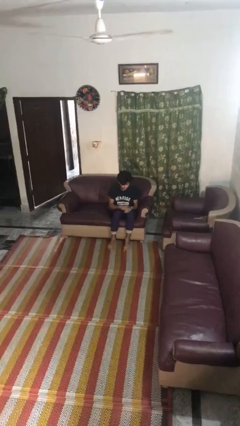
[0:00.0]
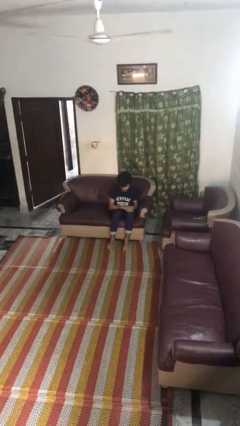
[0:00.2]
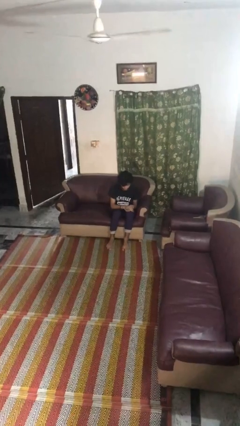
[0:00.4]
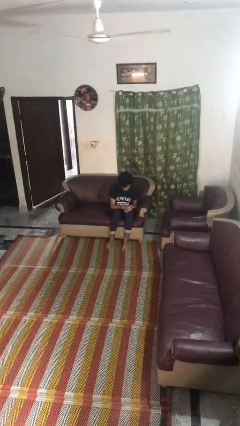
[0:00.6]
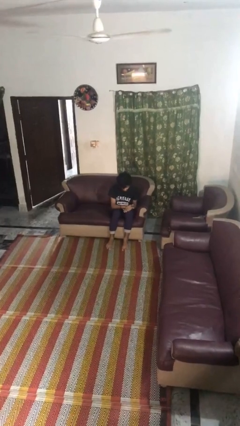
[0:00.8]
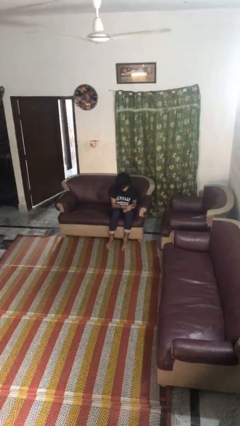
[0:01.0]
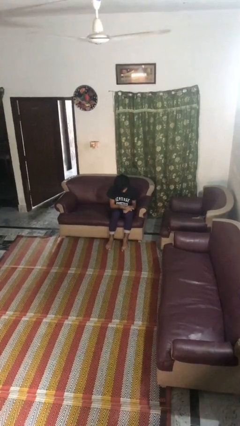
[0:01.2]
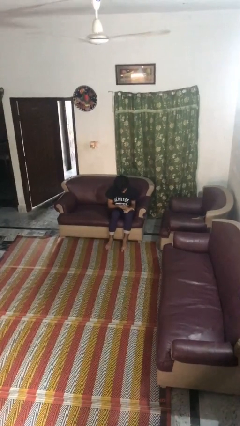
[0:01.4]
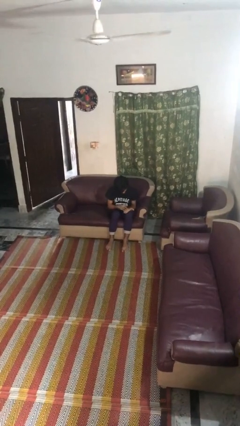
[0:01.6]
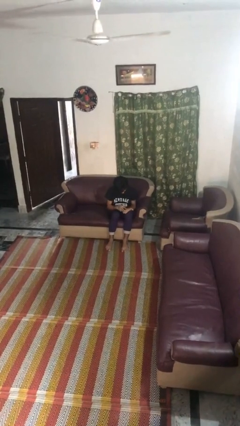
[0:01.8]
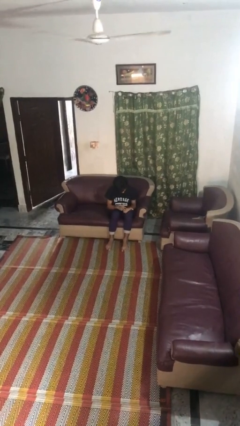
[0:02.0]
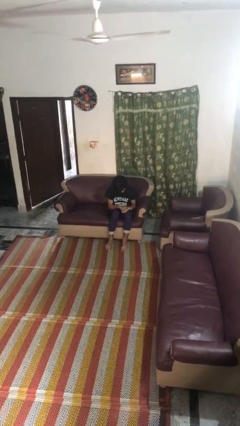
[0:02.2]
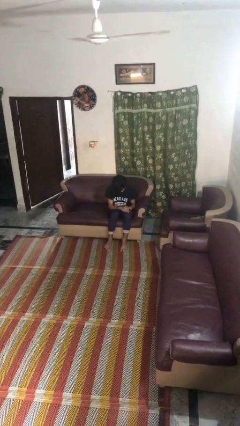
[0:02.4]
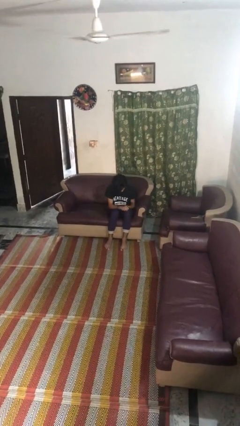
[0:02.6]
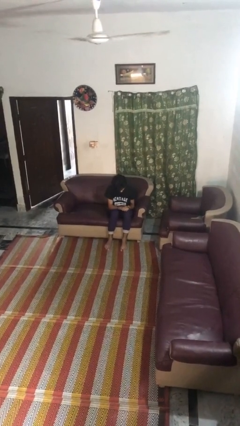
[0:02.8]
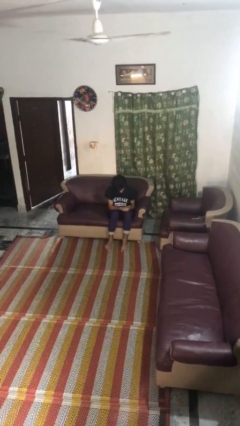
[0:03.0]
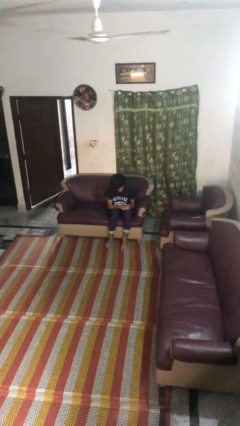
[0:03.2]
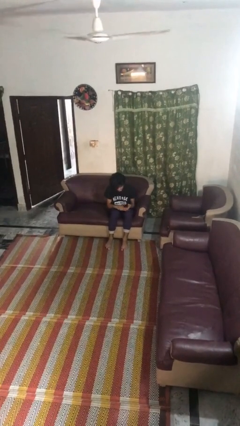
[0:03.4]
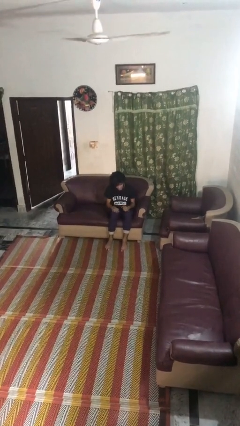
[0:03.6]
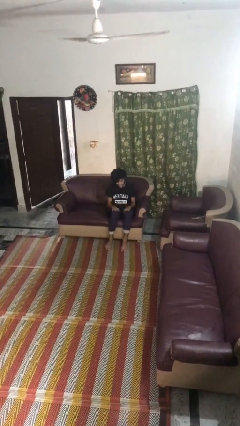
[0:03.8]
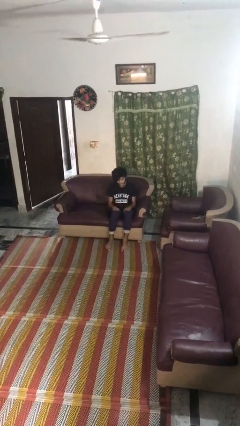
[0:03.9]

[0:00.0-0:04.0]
person looks at hands in lap

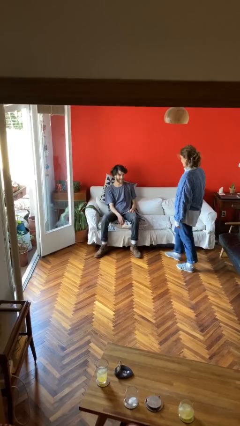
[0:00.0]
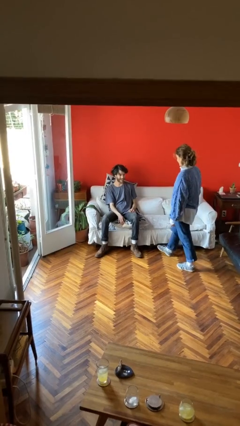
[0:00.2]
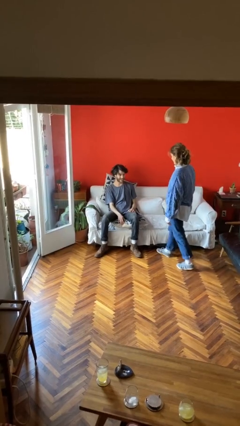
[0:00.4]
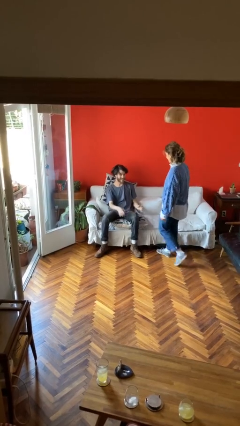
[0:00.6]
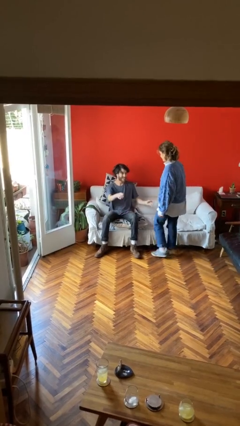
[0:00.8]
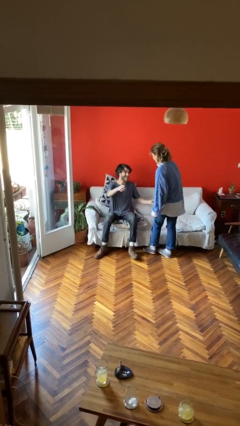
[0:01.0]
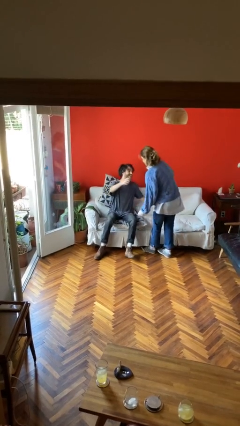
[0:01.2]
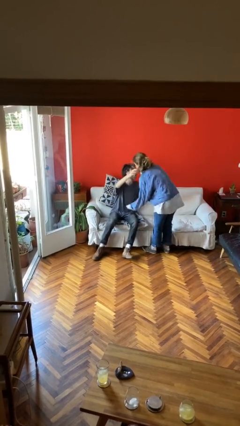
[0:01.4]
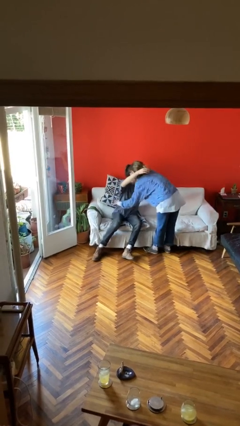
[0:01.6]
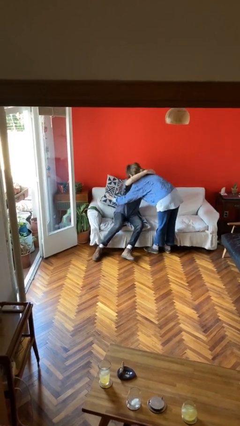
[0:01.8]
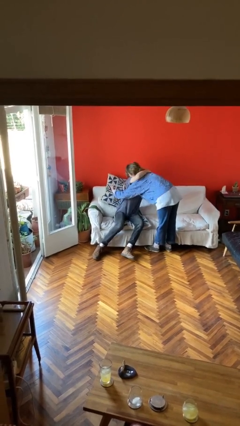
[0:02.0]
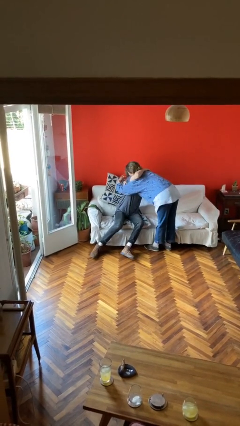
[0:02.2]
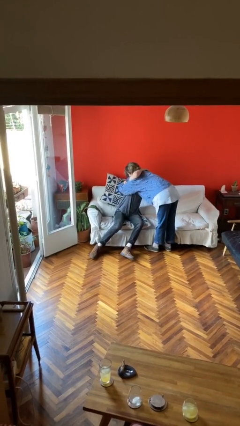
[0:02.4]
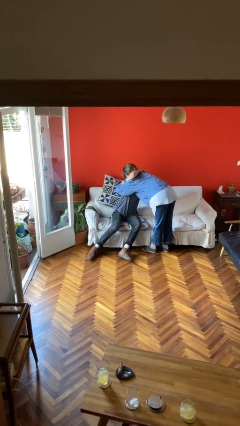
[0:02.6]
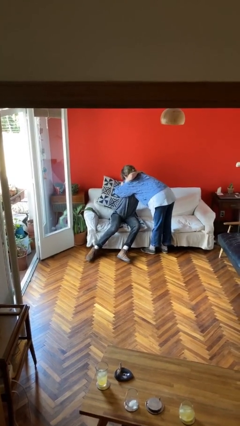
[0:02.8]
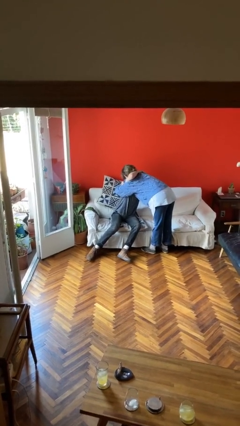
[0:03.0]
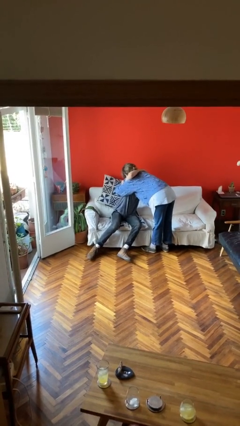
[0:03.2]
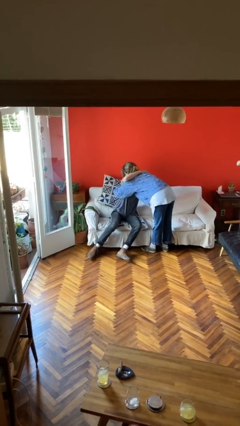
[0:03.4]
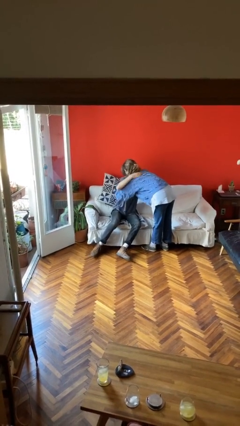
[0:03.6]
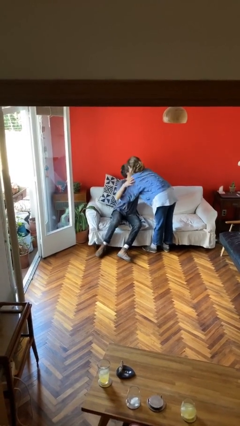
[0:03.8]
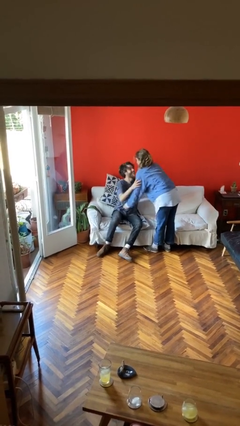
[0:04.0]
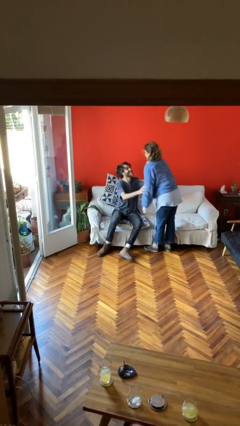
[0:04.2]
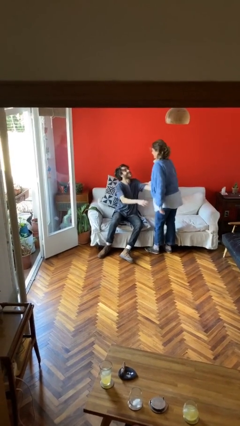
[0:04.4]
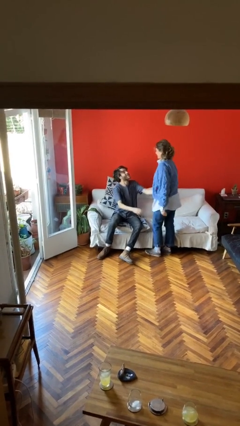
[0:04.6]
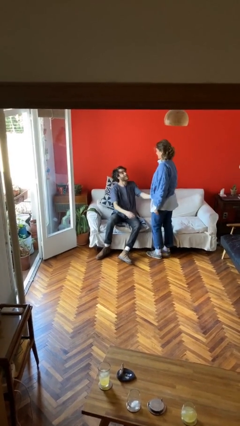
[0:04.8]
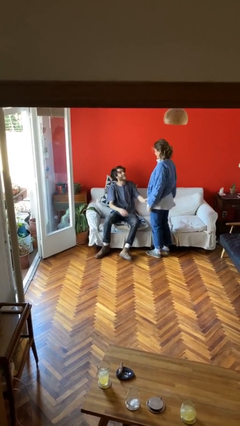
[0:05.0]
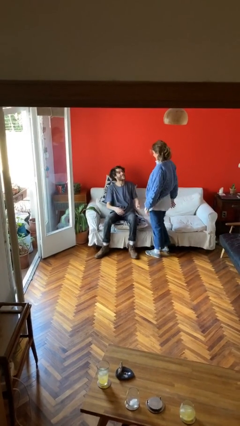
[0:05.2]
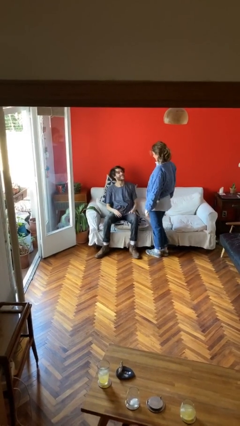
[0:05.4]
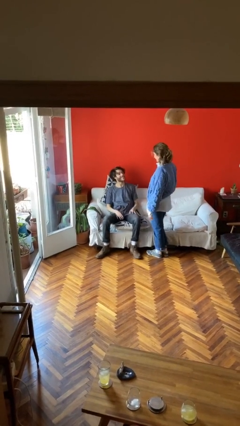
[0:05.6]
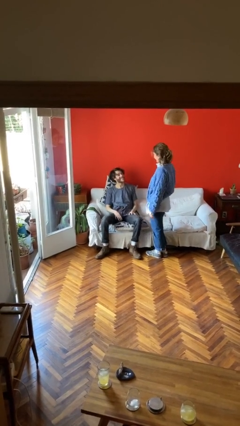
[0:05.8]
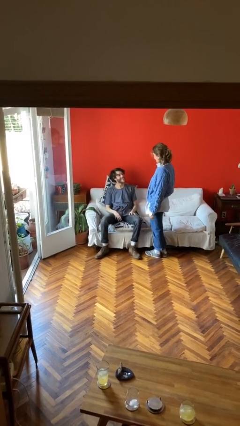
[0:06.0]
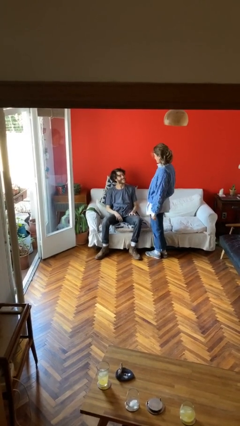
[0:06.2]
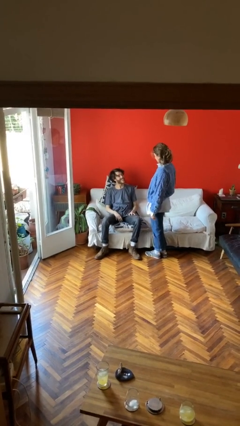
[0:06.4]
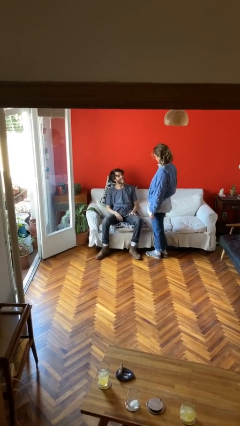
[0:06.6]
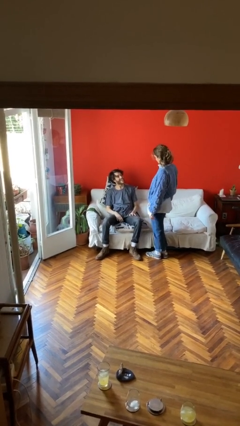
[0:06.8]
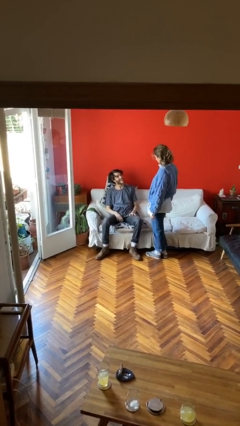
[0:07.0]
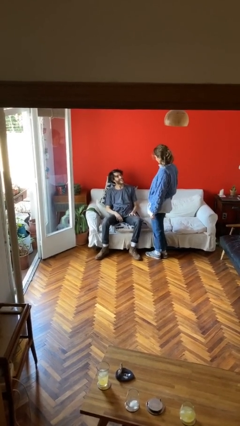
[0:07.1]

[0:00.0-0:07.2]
person embraces person

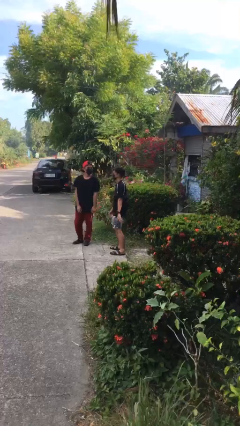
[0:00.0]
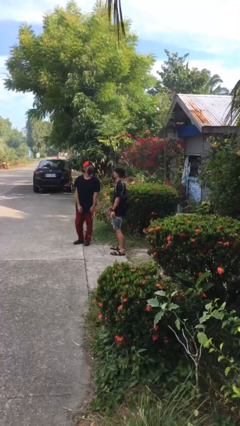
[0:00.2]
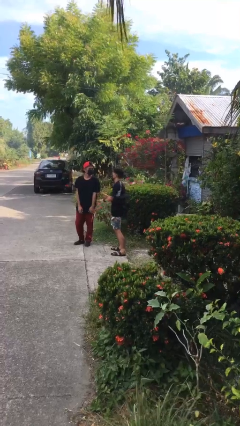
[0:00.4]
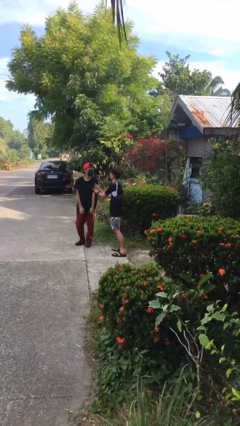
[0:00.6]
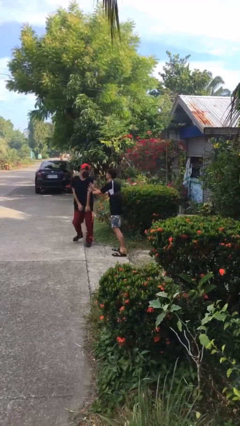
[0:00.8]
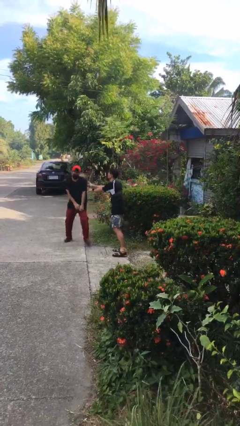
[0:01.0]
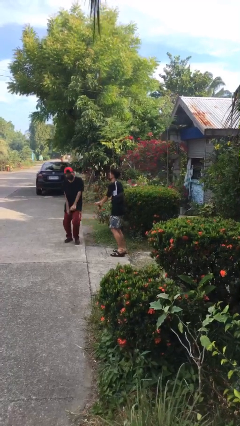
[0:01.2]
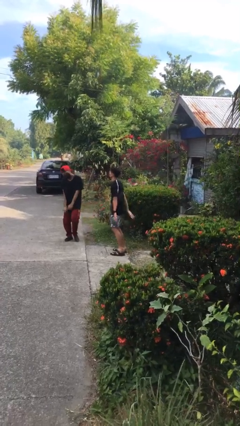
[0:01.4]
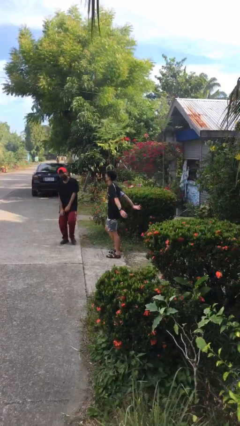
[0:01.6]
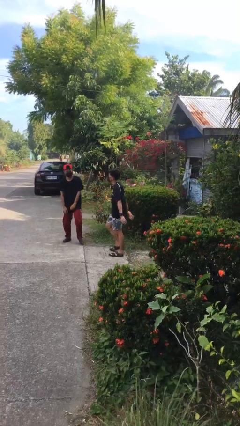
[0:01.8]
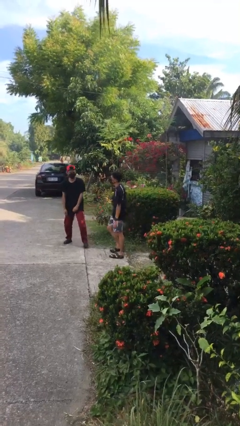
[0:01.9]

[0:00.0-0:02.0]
person shoves person

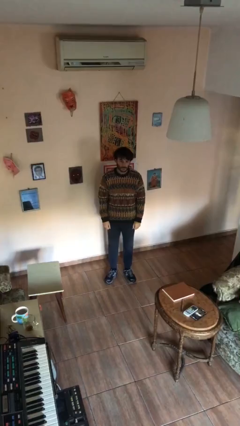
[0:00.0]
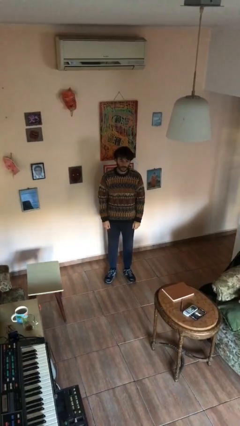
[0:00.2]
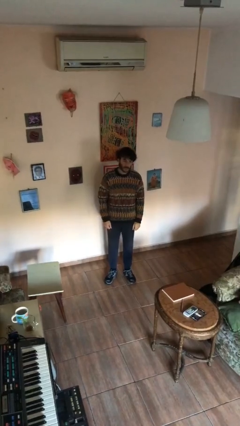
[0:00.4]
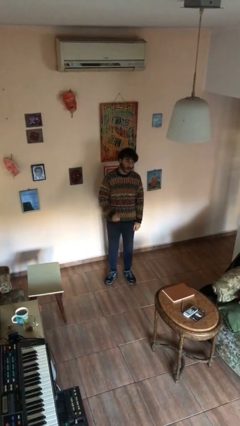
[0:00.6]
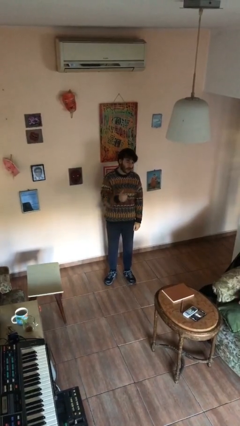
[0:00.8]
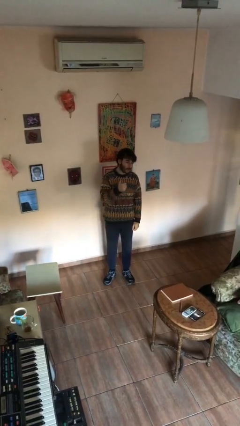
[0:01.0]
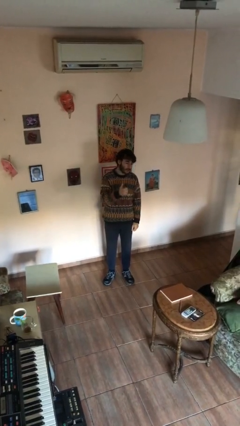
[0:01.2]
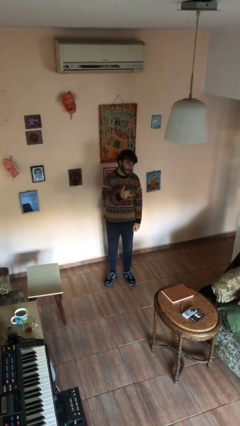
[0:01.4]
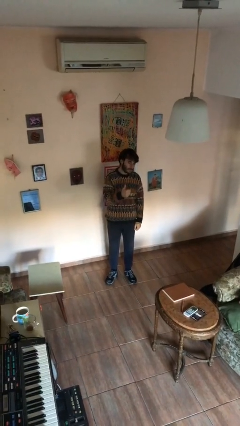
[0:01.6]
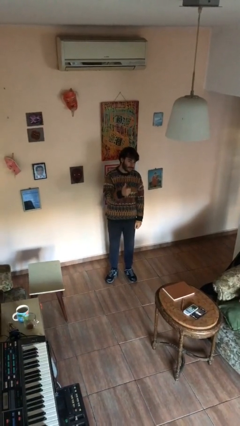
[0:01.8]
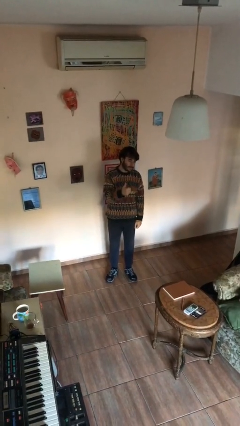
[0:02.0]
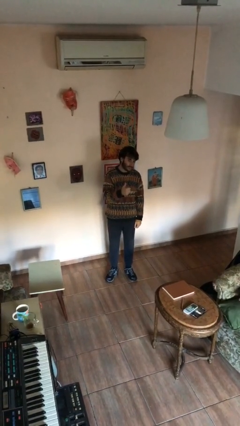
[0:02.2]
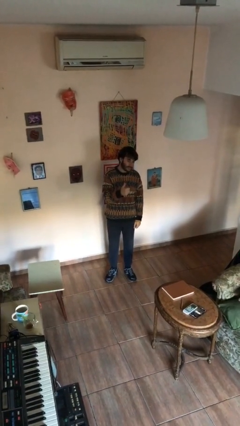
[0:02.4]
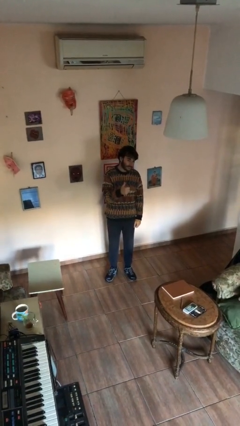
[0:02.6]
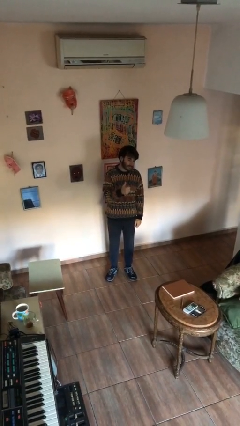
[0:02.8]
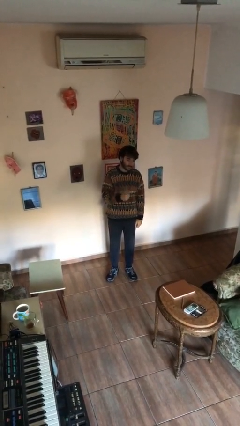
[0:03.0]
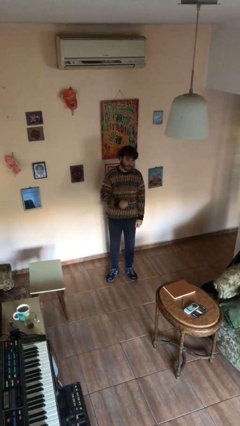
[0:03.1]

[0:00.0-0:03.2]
person gestures thumbs up

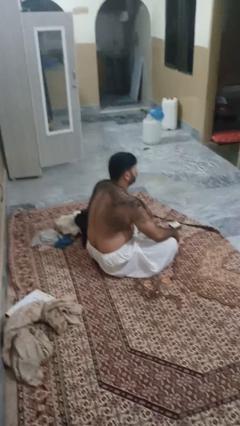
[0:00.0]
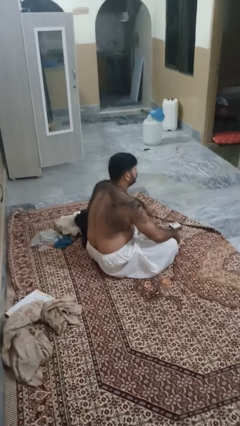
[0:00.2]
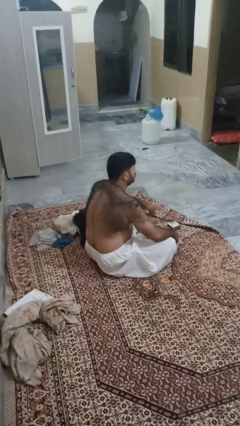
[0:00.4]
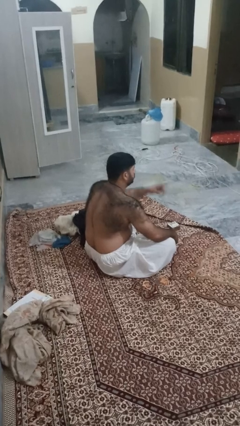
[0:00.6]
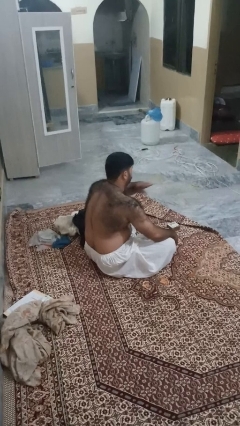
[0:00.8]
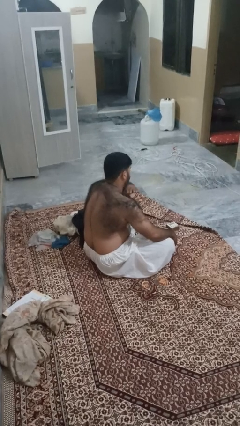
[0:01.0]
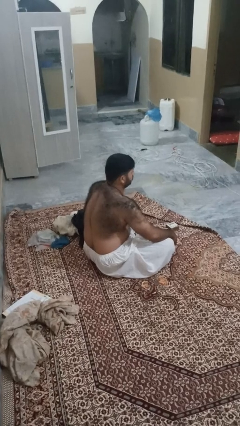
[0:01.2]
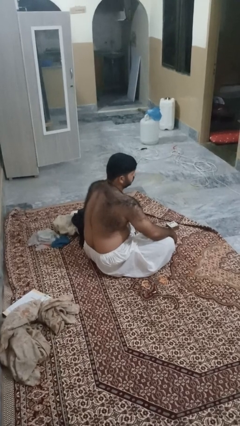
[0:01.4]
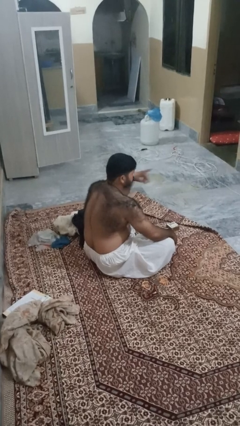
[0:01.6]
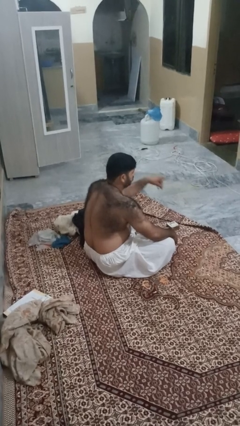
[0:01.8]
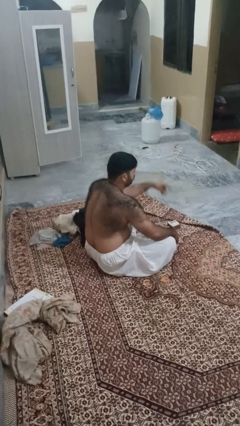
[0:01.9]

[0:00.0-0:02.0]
person gestures cut
